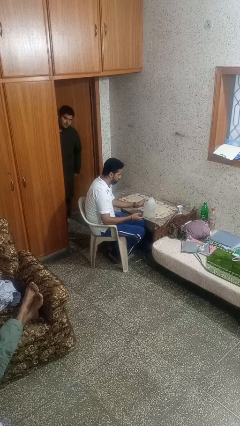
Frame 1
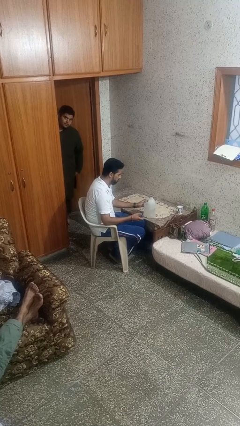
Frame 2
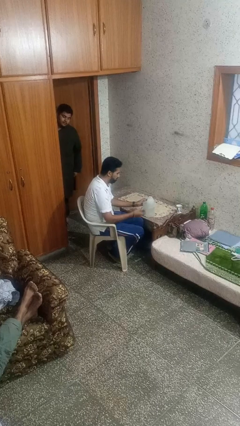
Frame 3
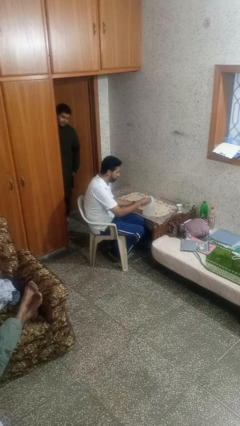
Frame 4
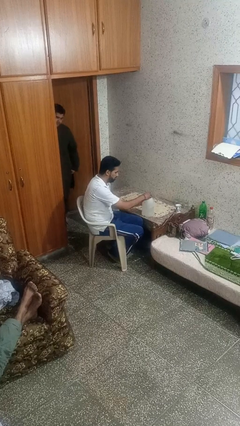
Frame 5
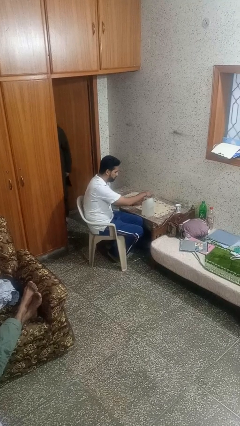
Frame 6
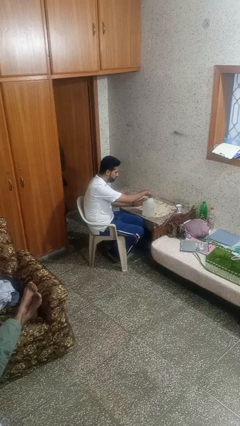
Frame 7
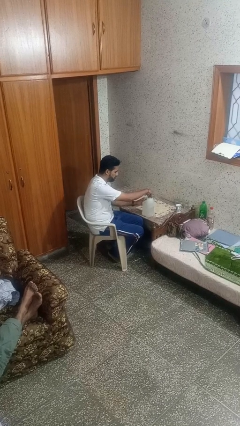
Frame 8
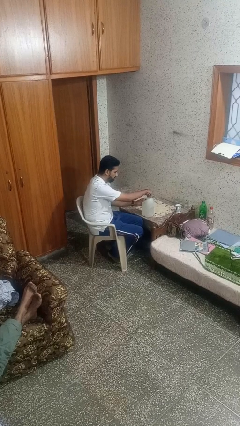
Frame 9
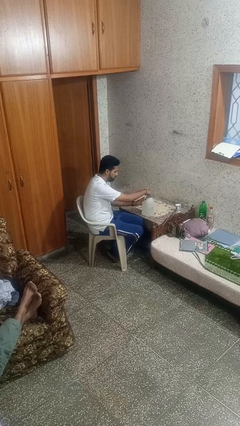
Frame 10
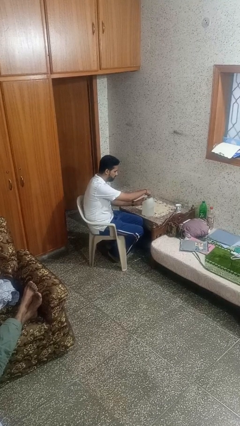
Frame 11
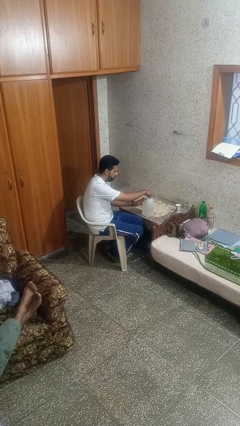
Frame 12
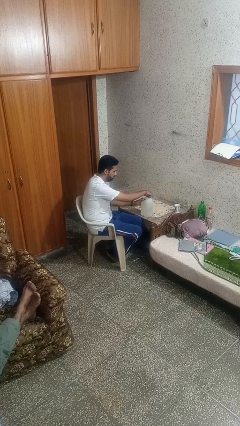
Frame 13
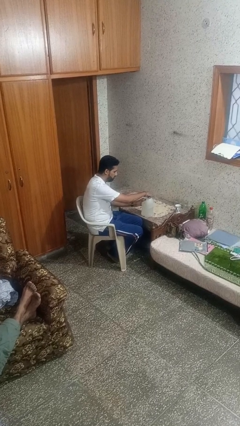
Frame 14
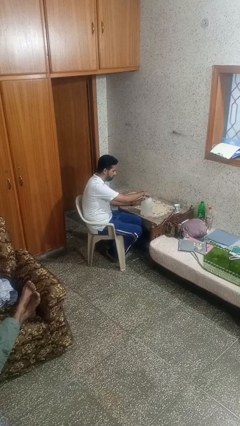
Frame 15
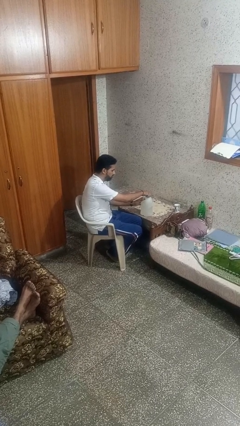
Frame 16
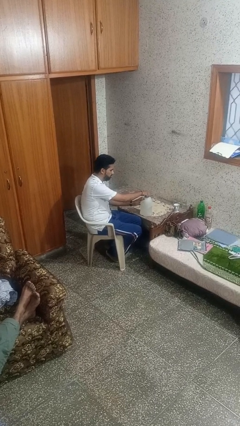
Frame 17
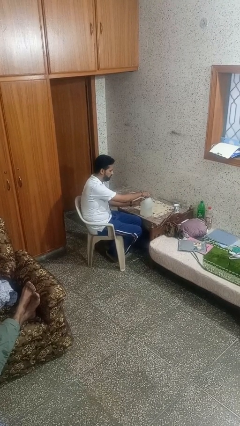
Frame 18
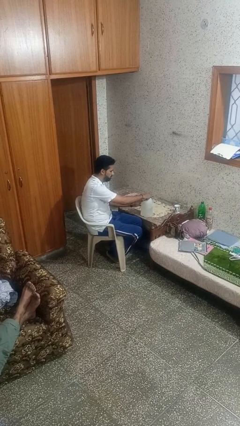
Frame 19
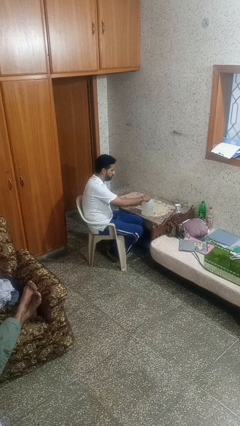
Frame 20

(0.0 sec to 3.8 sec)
person screws lid to bottle

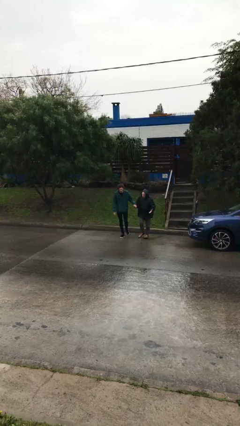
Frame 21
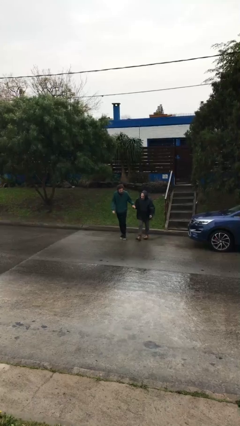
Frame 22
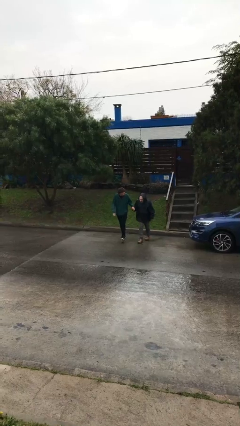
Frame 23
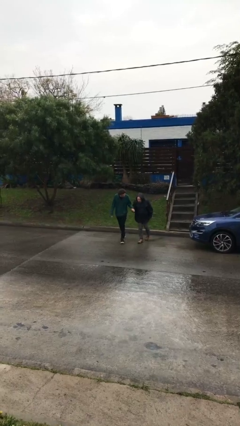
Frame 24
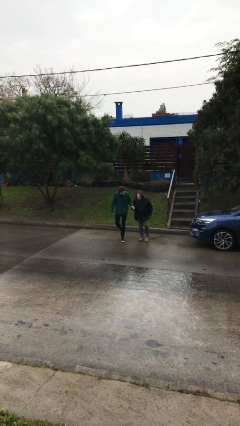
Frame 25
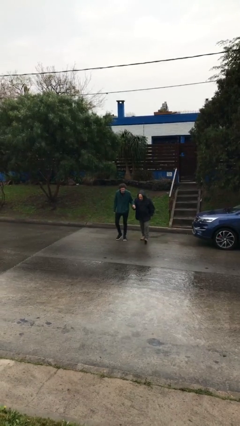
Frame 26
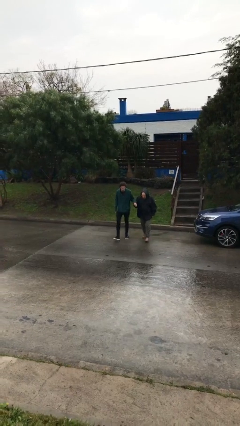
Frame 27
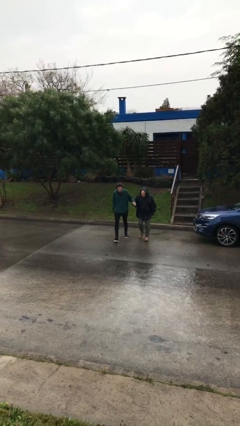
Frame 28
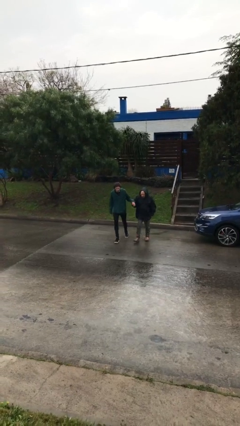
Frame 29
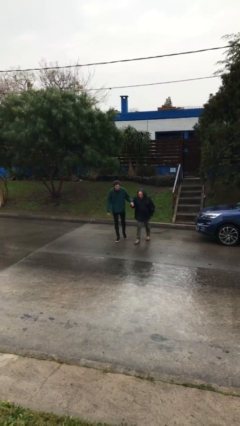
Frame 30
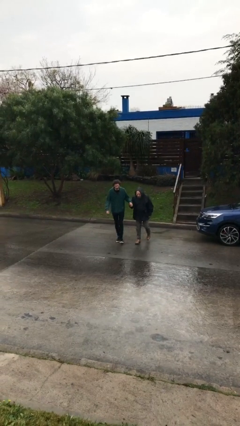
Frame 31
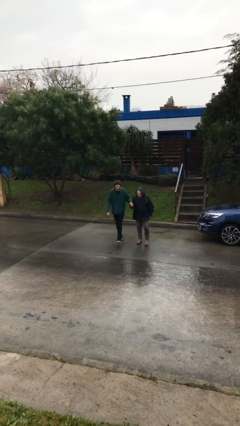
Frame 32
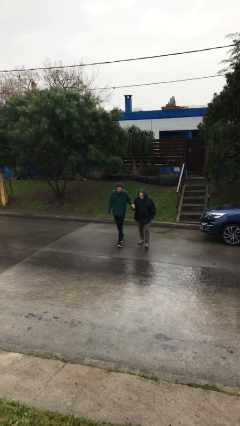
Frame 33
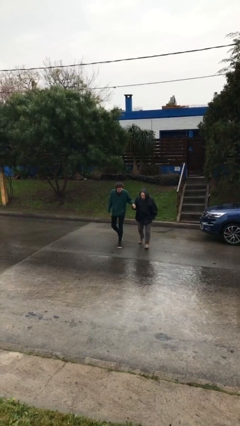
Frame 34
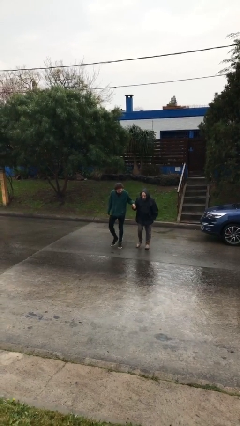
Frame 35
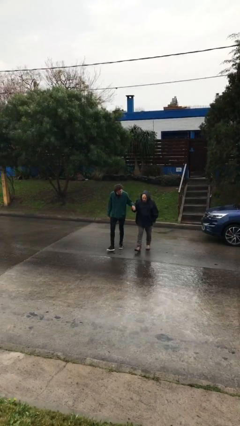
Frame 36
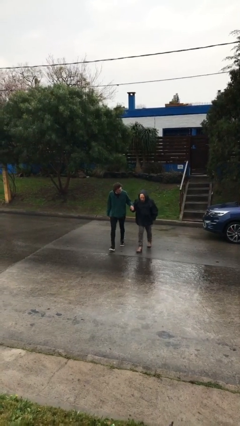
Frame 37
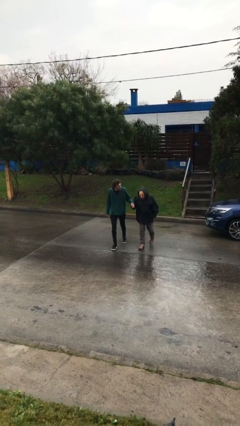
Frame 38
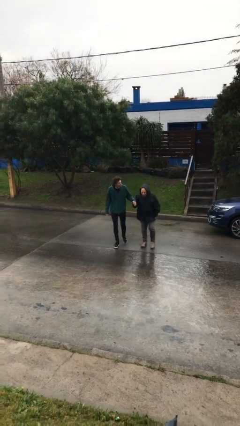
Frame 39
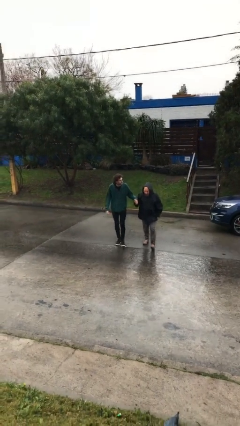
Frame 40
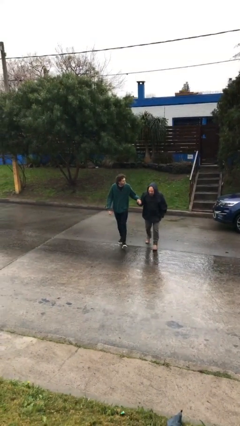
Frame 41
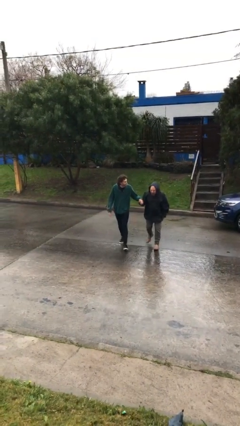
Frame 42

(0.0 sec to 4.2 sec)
person holds hand

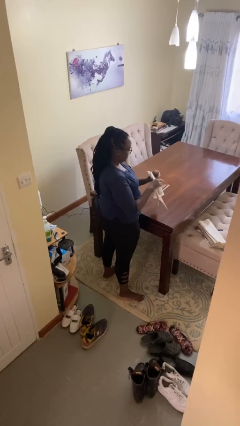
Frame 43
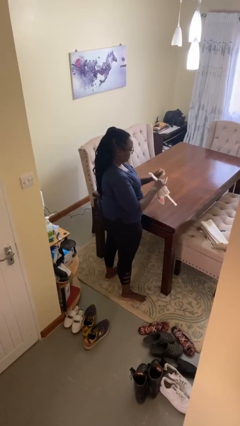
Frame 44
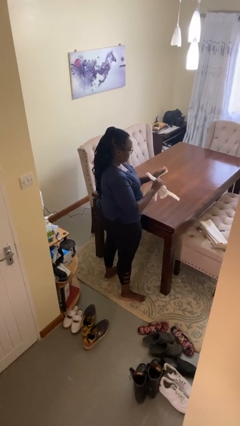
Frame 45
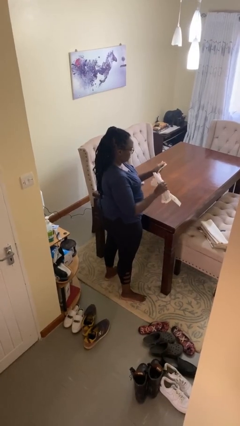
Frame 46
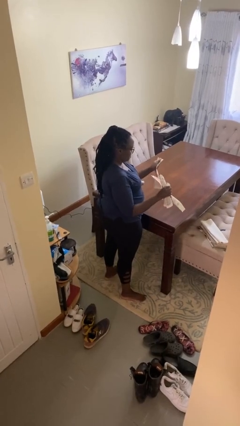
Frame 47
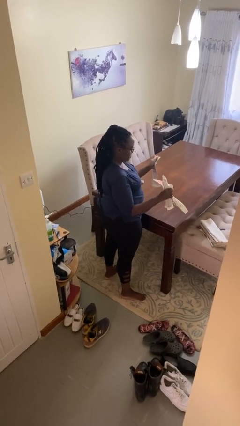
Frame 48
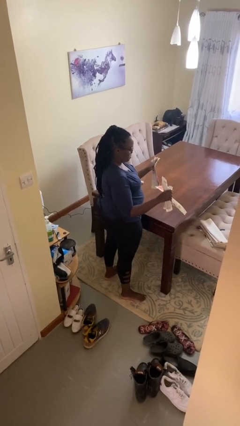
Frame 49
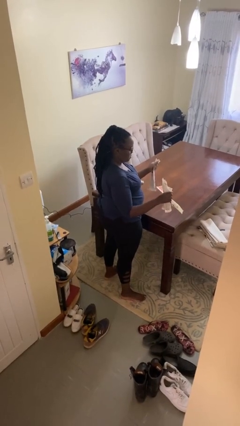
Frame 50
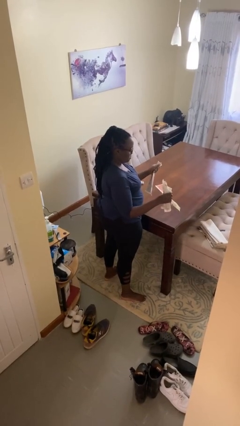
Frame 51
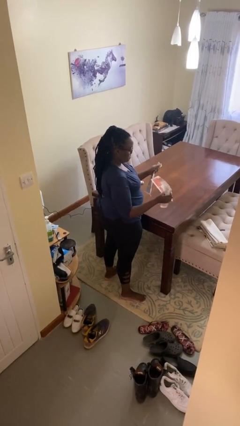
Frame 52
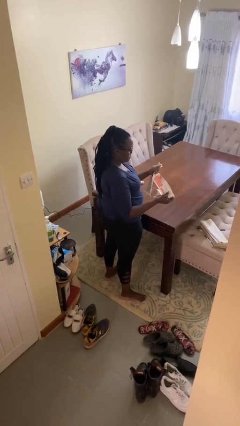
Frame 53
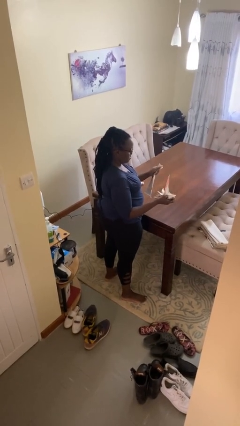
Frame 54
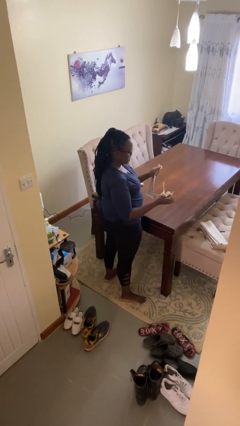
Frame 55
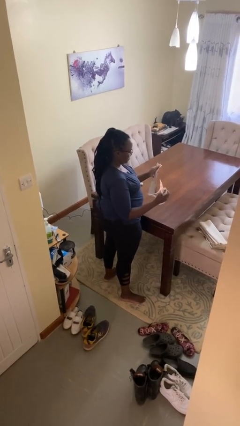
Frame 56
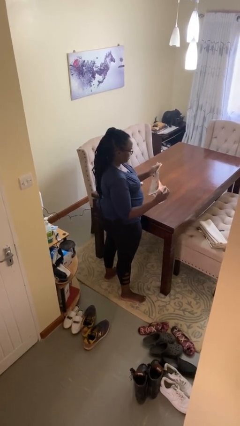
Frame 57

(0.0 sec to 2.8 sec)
person tears paper

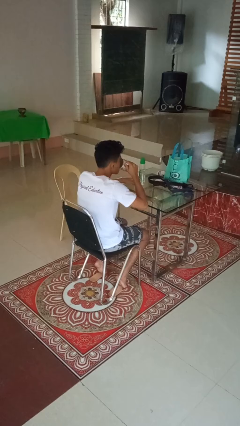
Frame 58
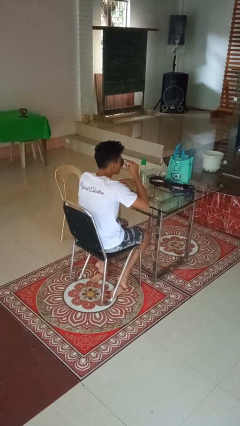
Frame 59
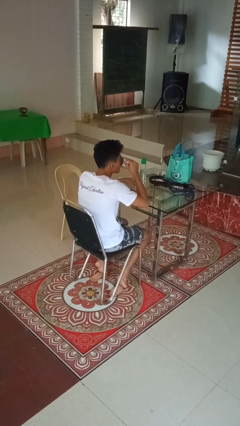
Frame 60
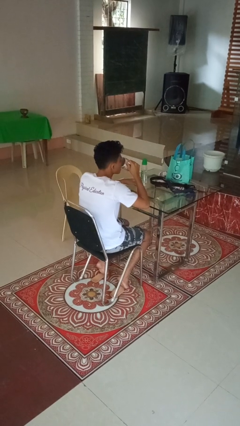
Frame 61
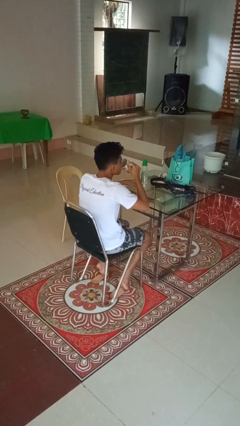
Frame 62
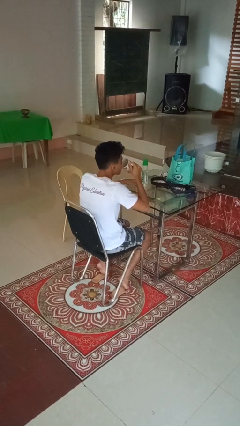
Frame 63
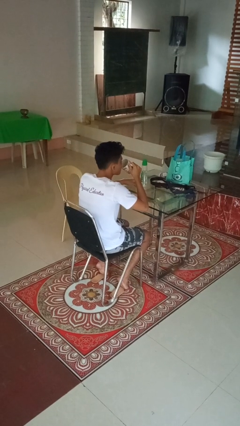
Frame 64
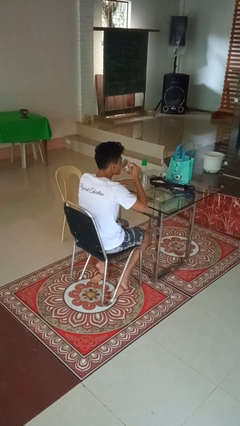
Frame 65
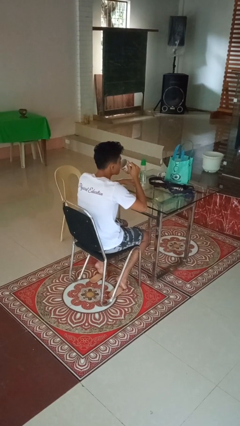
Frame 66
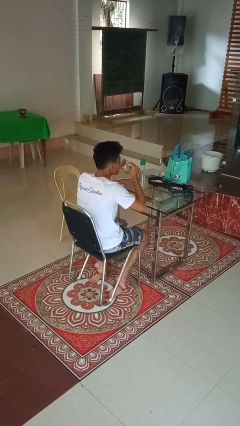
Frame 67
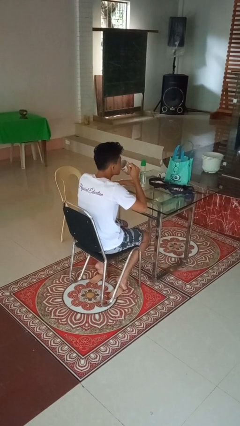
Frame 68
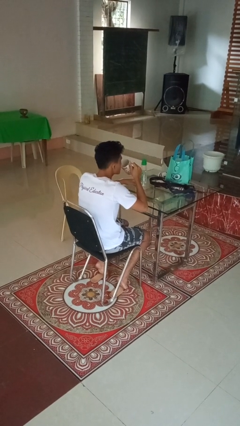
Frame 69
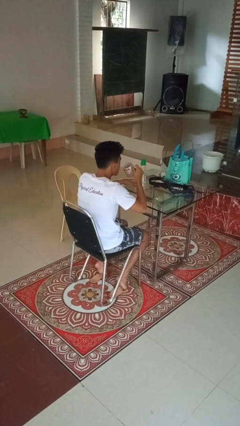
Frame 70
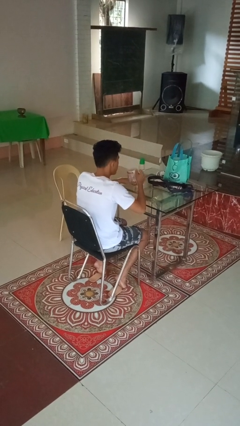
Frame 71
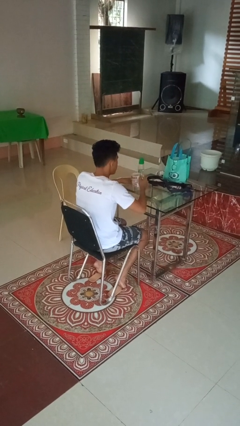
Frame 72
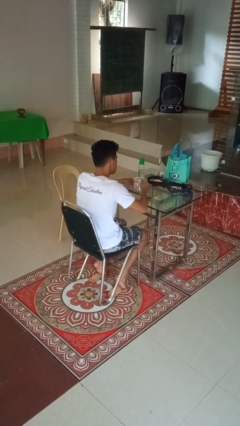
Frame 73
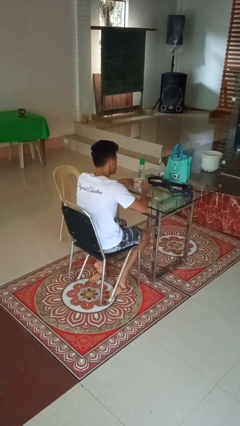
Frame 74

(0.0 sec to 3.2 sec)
person drinks from shotglass

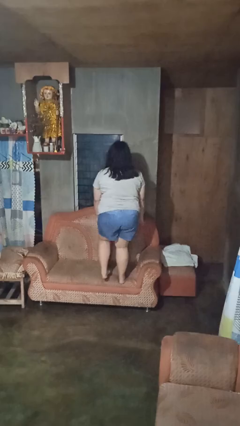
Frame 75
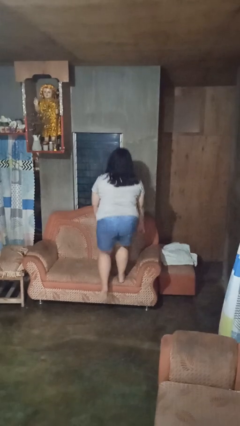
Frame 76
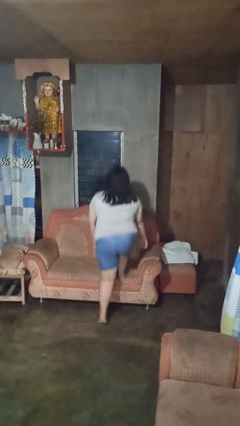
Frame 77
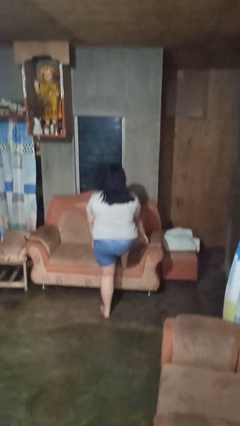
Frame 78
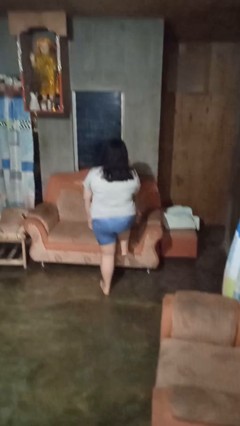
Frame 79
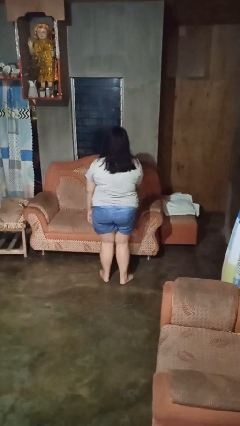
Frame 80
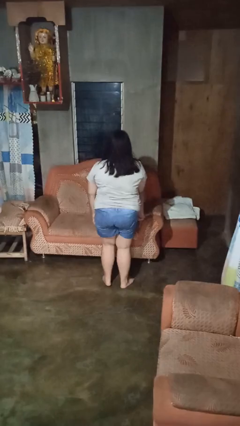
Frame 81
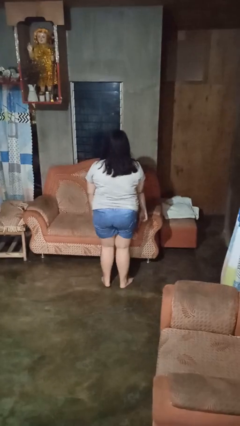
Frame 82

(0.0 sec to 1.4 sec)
person climbs off couch

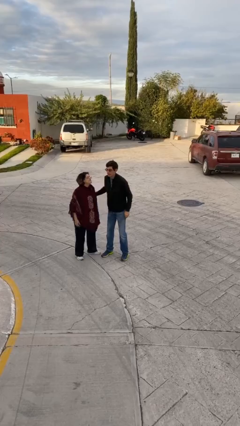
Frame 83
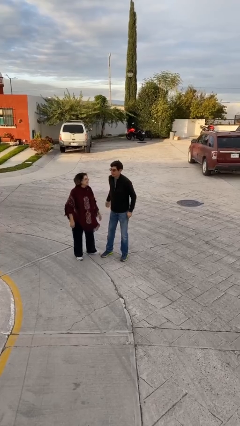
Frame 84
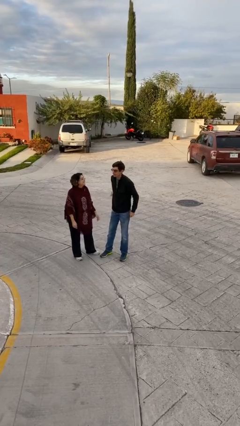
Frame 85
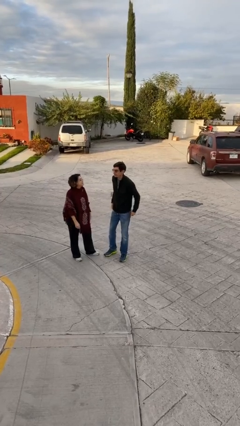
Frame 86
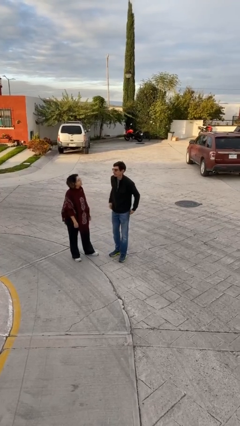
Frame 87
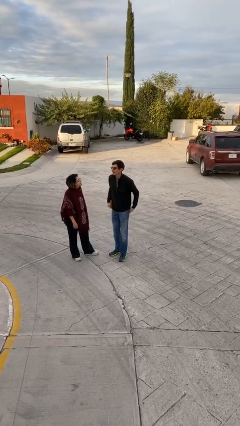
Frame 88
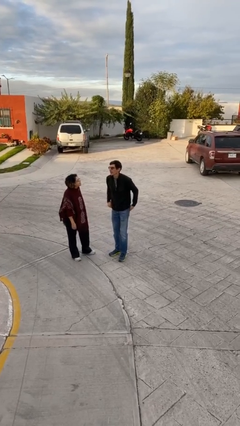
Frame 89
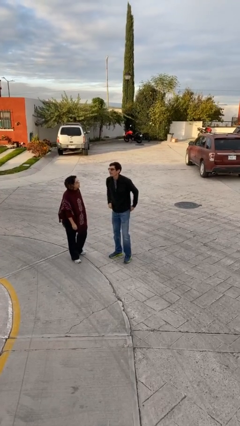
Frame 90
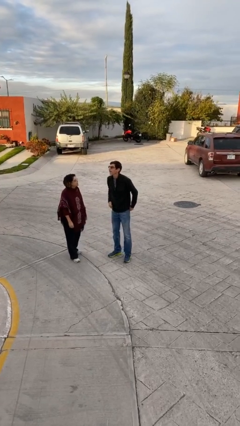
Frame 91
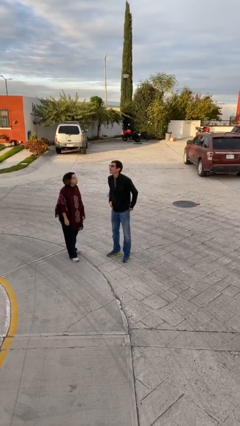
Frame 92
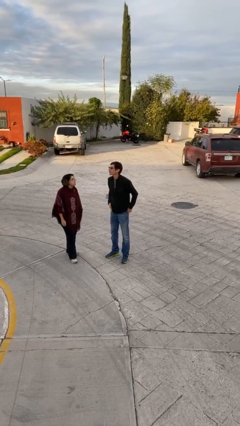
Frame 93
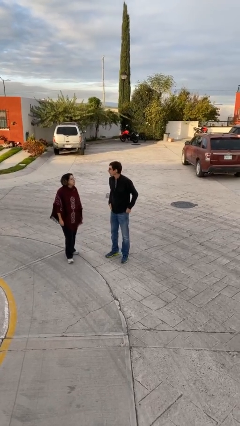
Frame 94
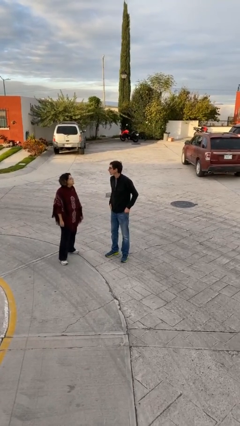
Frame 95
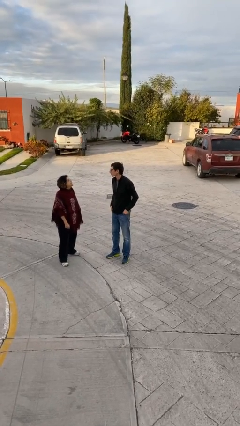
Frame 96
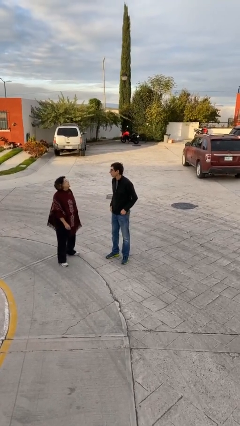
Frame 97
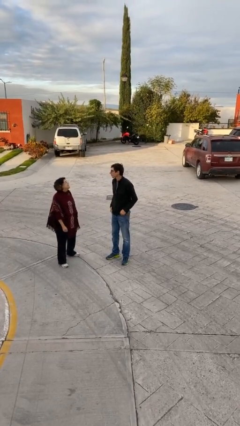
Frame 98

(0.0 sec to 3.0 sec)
person talks to person
